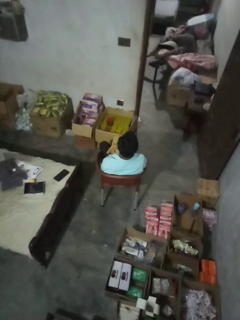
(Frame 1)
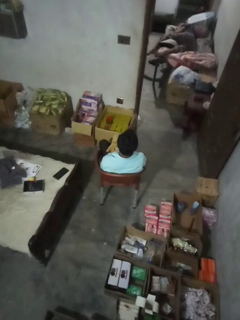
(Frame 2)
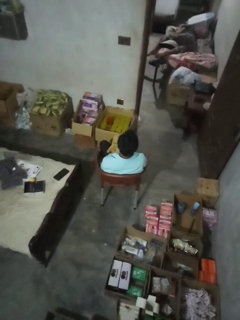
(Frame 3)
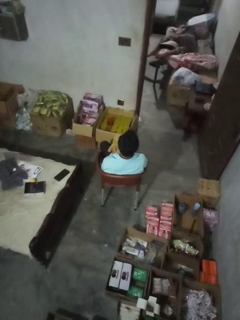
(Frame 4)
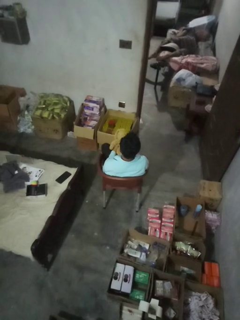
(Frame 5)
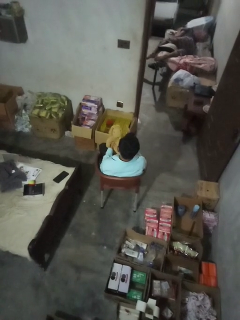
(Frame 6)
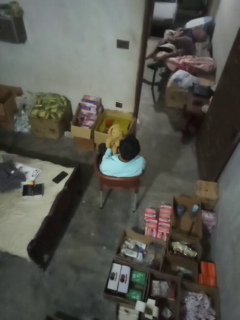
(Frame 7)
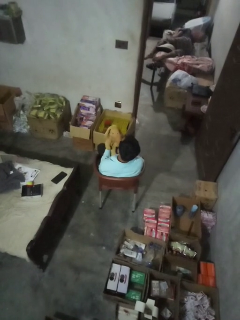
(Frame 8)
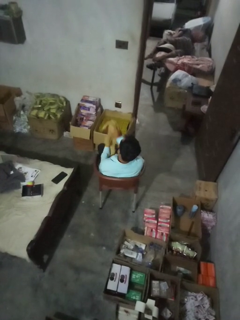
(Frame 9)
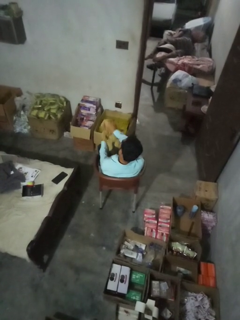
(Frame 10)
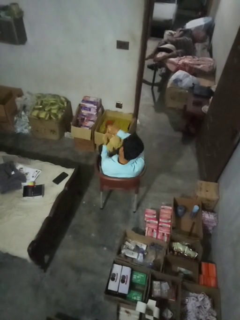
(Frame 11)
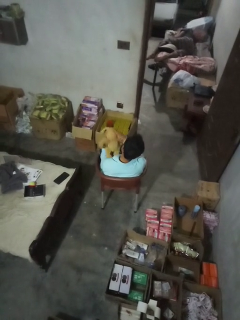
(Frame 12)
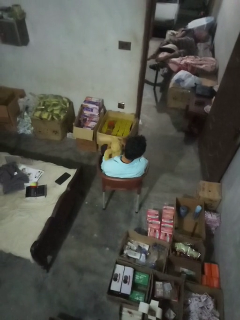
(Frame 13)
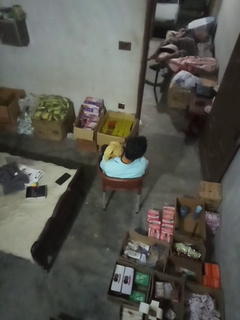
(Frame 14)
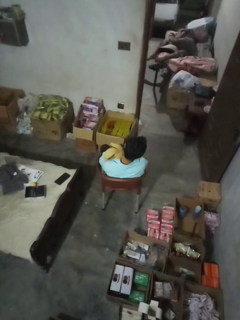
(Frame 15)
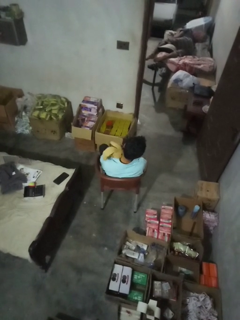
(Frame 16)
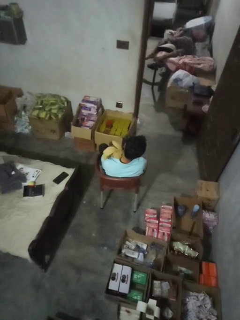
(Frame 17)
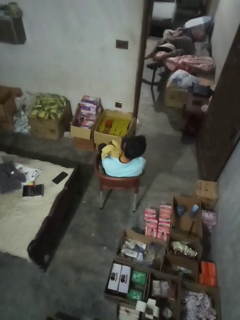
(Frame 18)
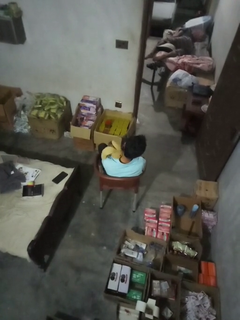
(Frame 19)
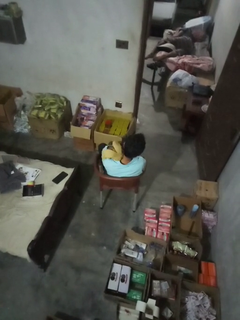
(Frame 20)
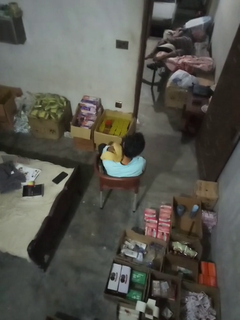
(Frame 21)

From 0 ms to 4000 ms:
person hugs stuffed animal

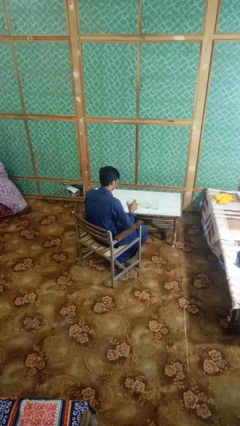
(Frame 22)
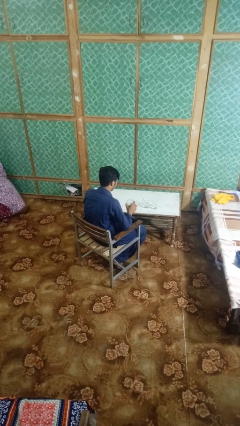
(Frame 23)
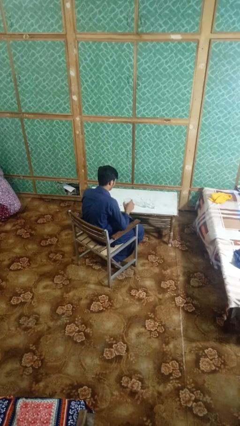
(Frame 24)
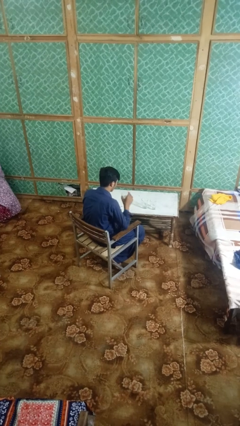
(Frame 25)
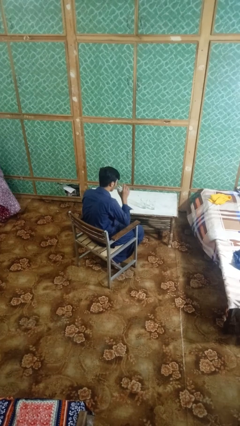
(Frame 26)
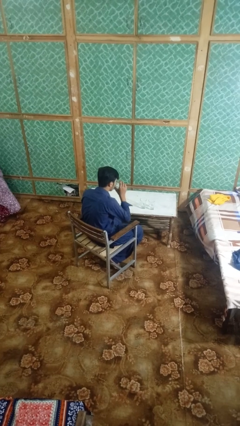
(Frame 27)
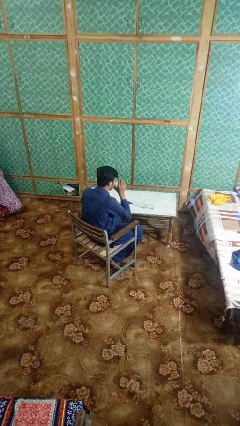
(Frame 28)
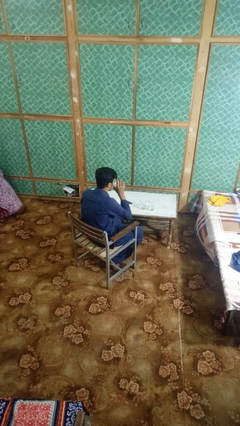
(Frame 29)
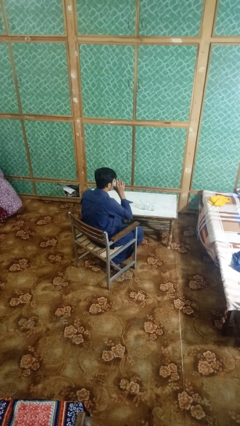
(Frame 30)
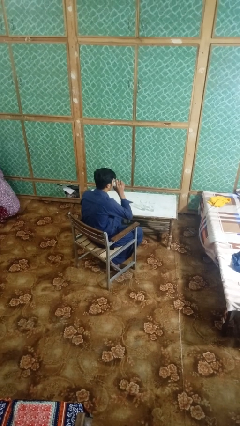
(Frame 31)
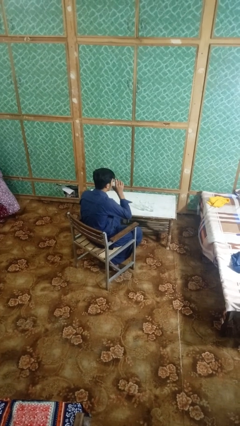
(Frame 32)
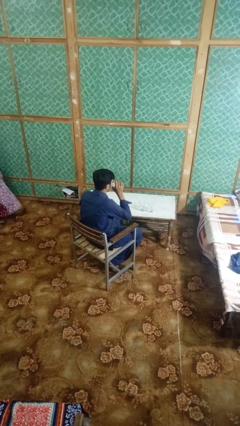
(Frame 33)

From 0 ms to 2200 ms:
person drinks from shotglass

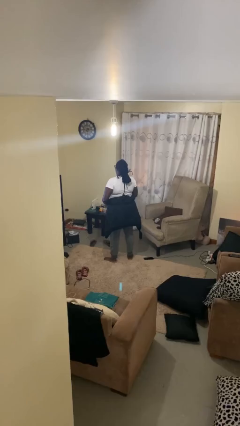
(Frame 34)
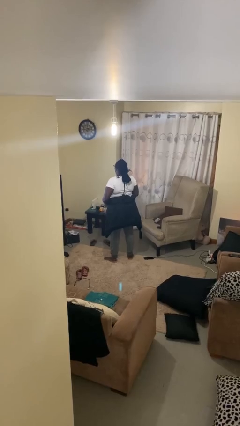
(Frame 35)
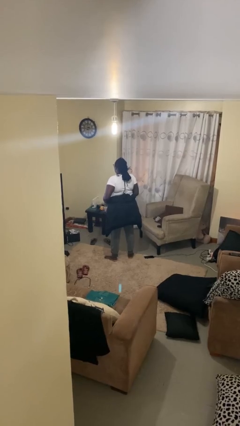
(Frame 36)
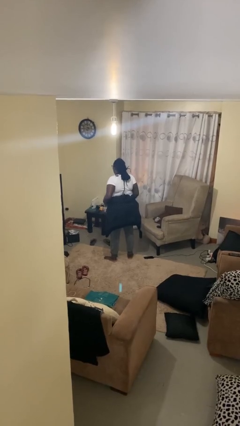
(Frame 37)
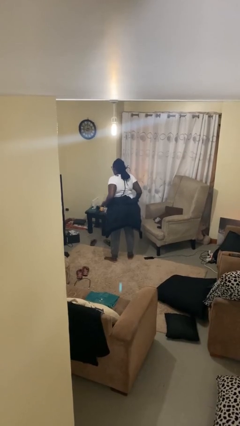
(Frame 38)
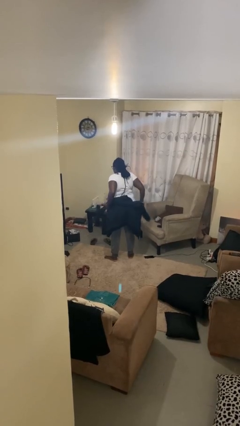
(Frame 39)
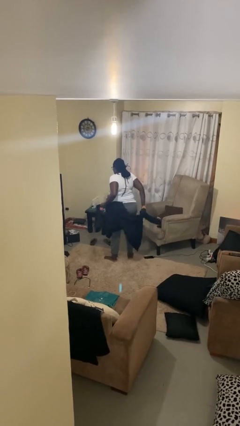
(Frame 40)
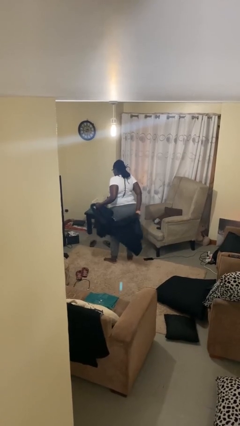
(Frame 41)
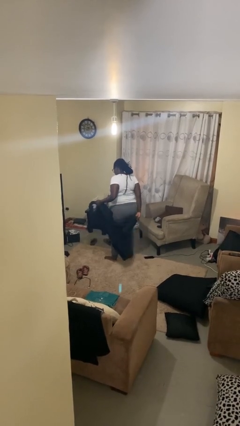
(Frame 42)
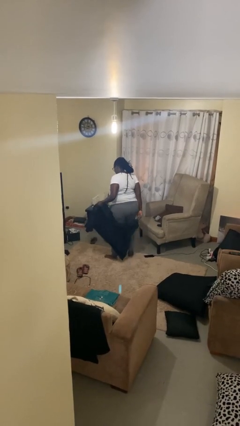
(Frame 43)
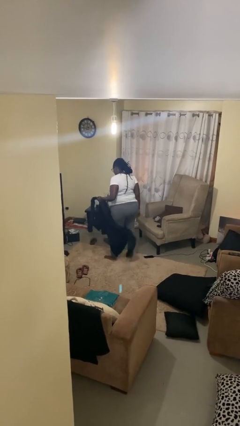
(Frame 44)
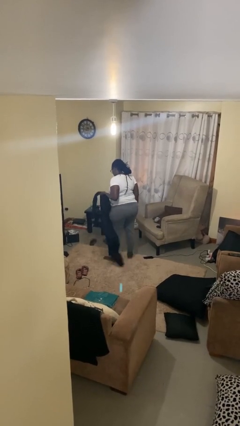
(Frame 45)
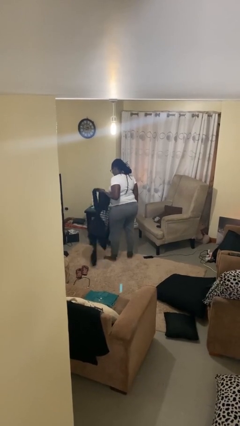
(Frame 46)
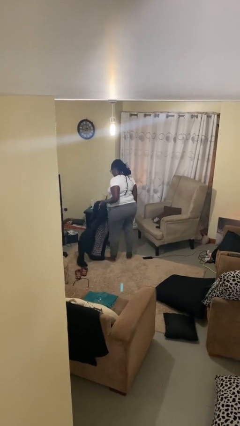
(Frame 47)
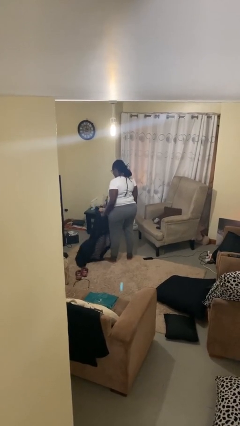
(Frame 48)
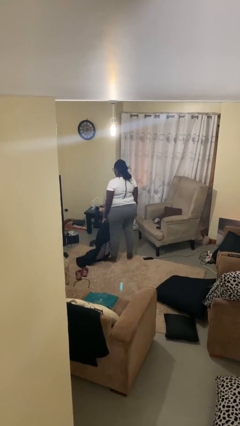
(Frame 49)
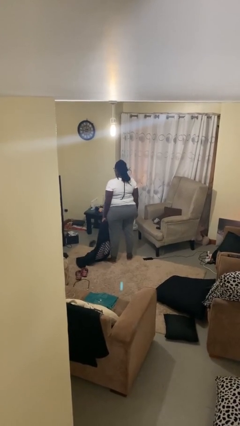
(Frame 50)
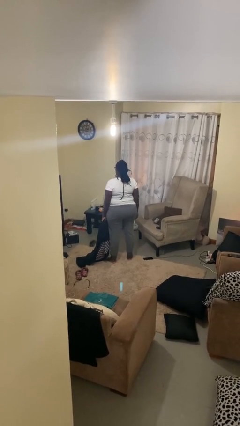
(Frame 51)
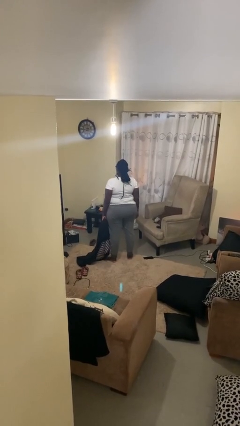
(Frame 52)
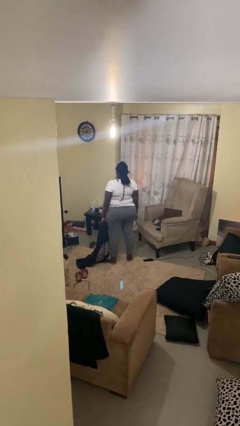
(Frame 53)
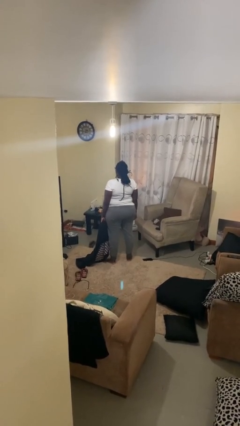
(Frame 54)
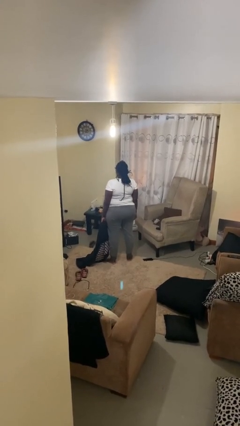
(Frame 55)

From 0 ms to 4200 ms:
person unties jacket around waist

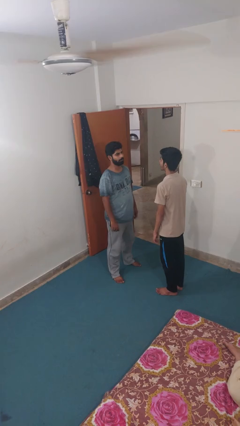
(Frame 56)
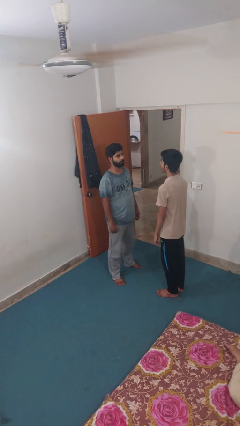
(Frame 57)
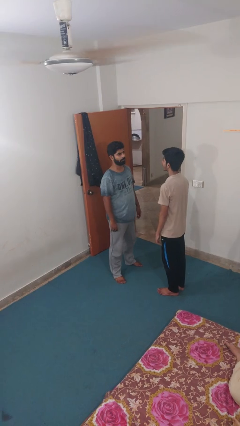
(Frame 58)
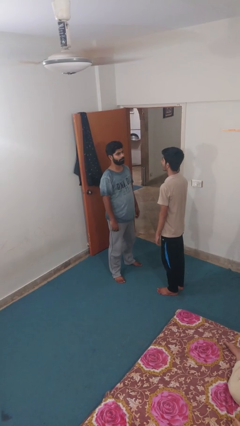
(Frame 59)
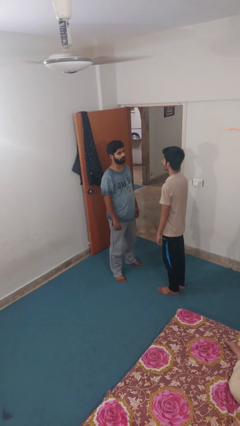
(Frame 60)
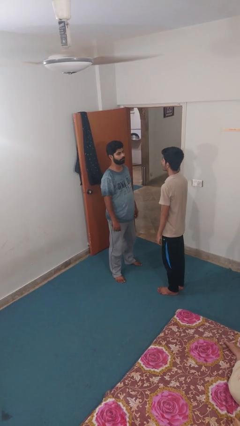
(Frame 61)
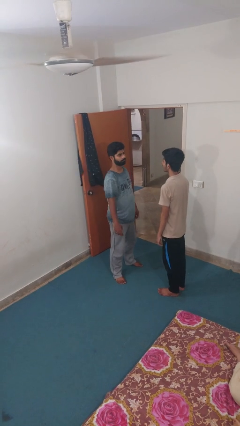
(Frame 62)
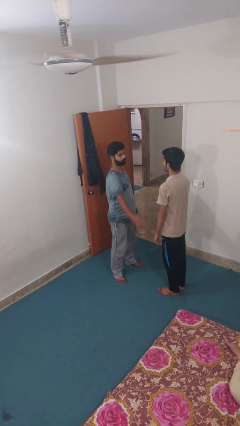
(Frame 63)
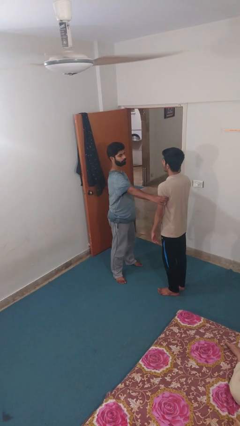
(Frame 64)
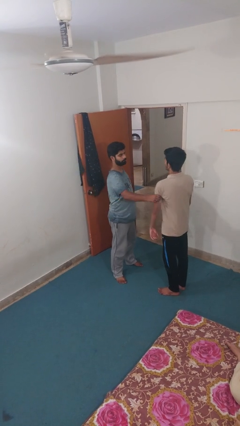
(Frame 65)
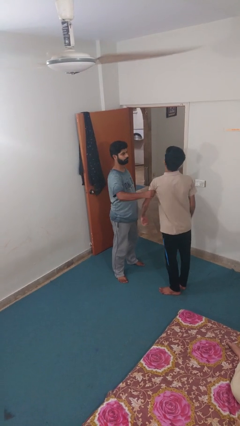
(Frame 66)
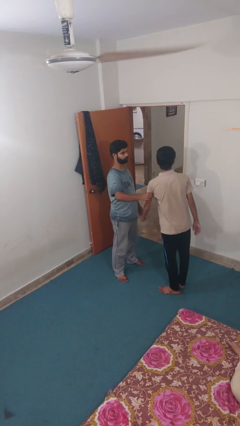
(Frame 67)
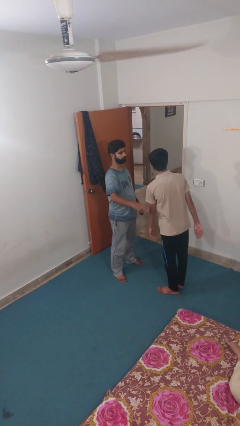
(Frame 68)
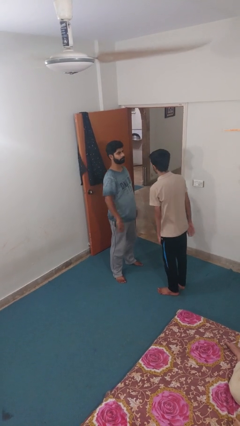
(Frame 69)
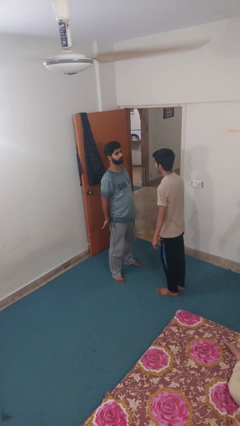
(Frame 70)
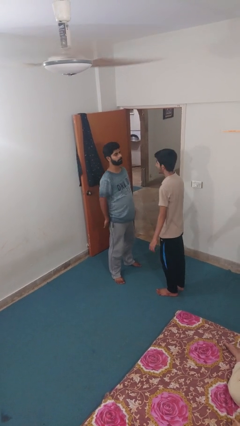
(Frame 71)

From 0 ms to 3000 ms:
person grabs person by bicep

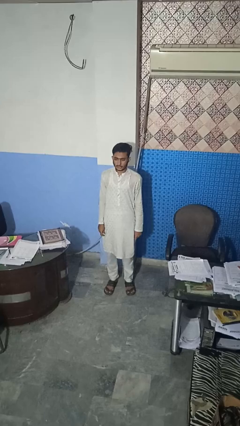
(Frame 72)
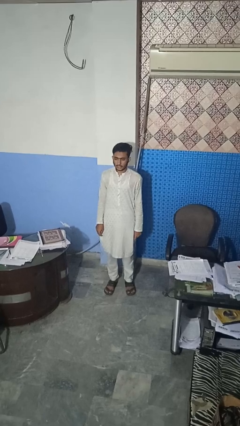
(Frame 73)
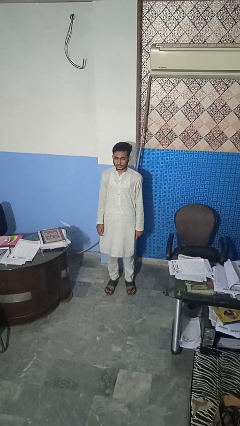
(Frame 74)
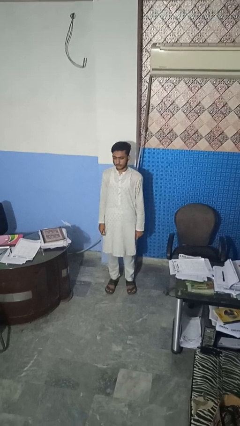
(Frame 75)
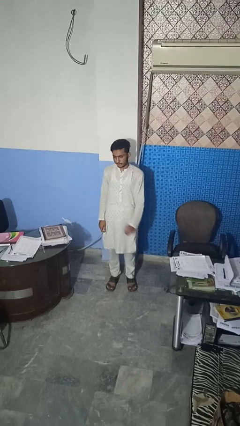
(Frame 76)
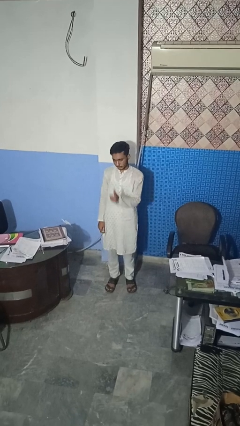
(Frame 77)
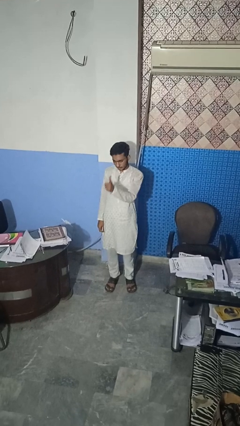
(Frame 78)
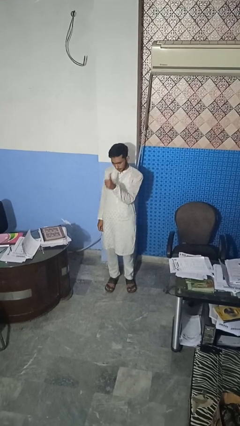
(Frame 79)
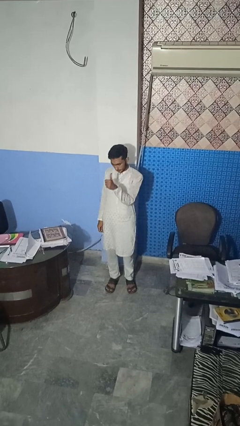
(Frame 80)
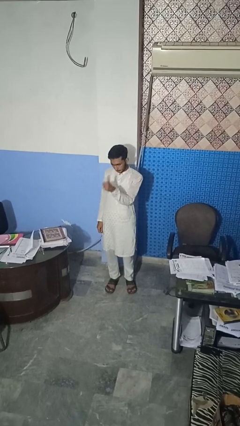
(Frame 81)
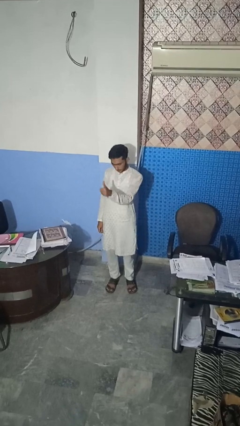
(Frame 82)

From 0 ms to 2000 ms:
person gestures thumbs up

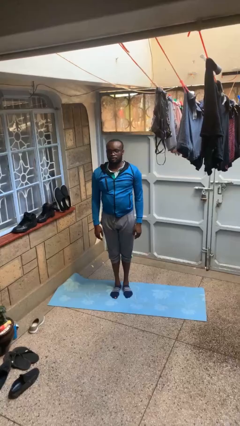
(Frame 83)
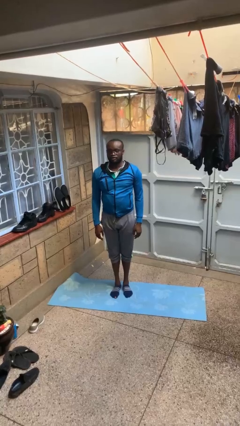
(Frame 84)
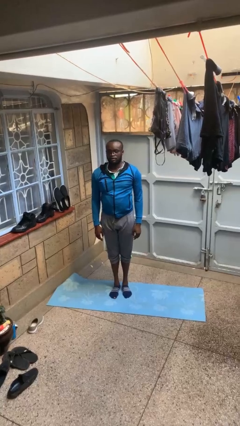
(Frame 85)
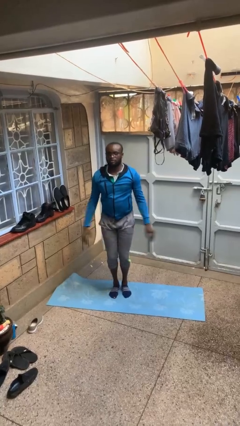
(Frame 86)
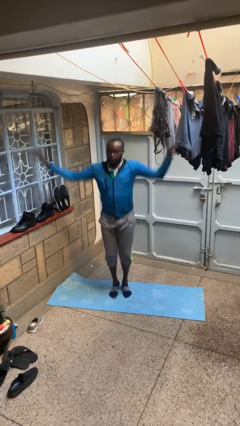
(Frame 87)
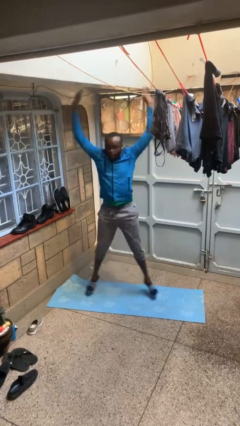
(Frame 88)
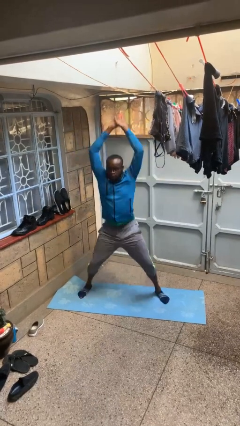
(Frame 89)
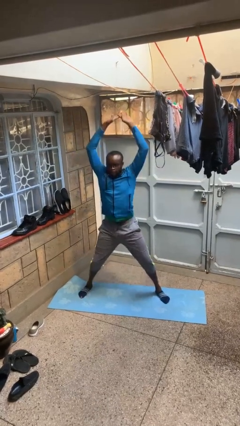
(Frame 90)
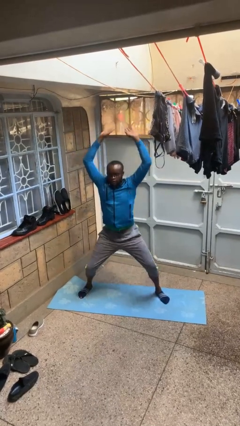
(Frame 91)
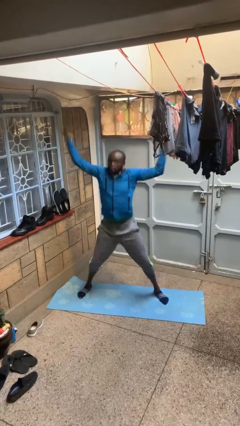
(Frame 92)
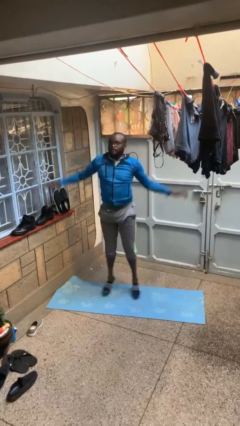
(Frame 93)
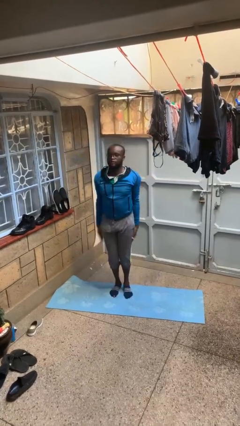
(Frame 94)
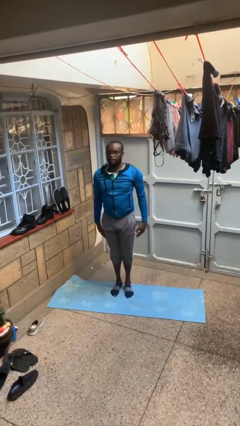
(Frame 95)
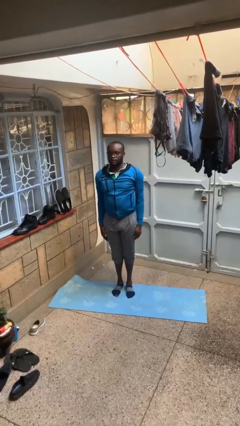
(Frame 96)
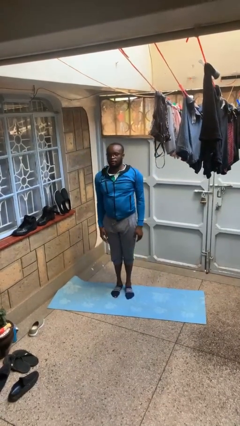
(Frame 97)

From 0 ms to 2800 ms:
person exercises with jumping jacks
